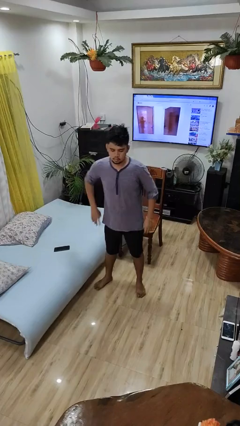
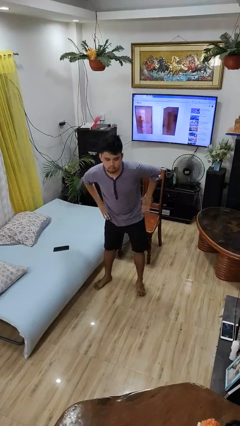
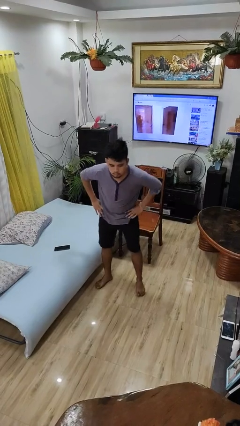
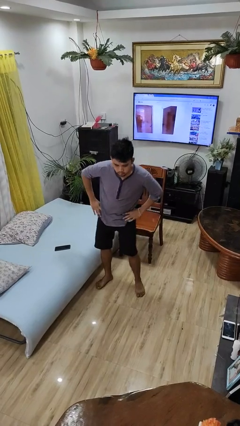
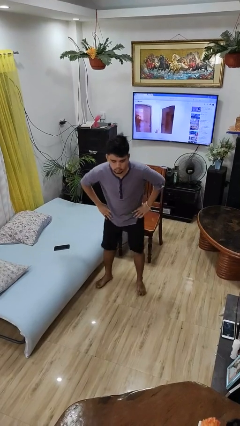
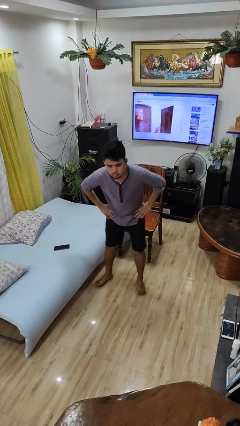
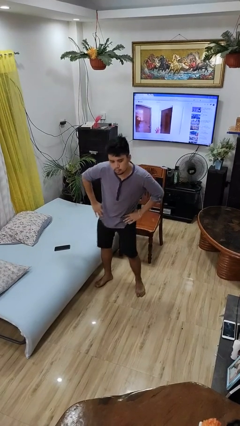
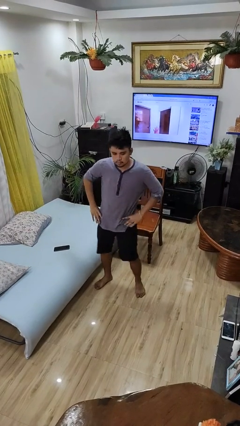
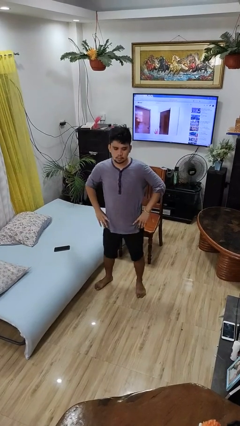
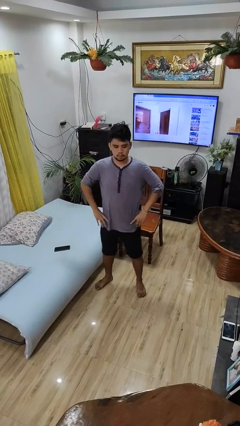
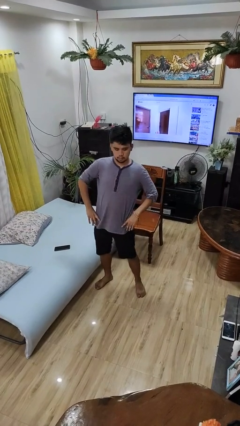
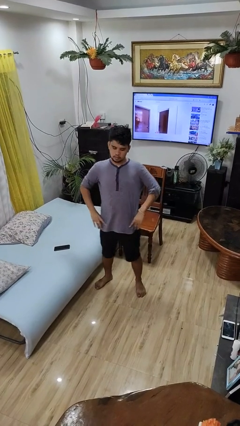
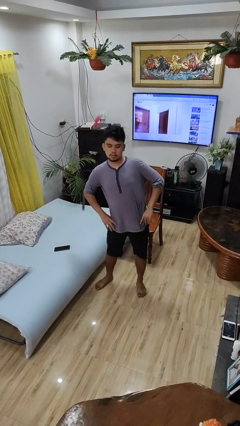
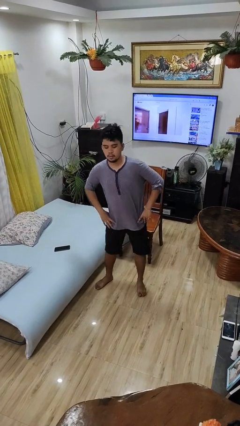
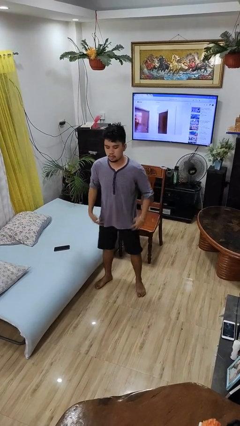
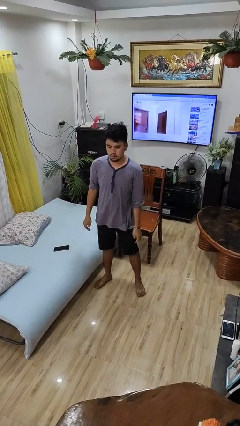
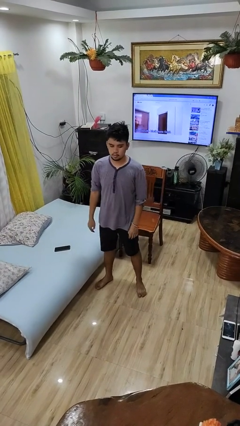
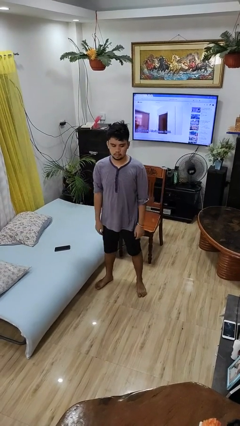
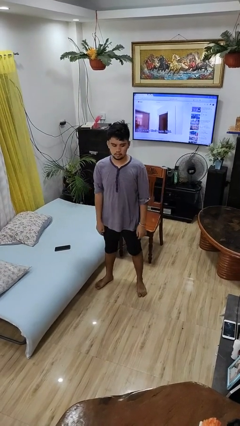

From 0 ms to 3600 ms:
person wiggles hips

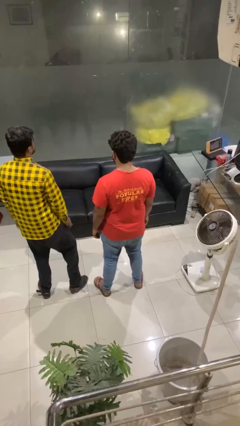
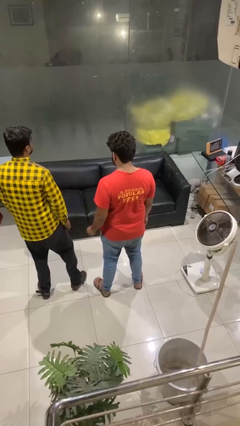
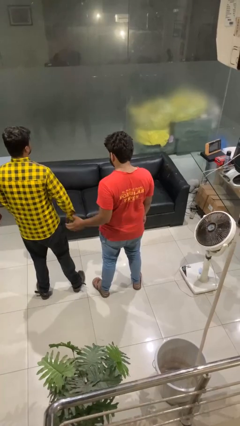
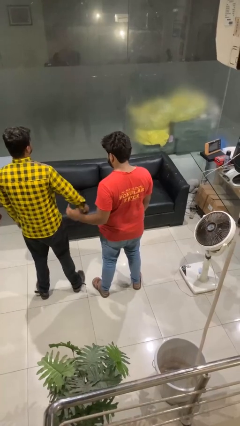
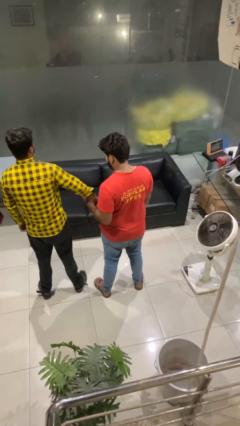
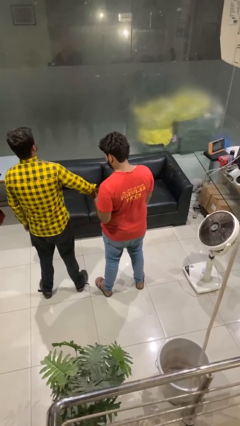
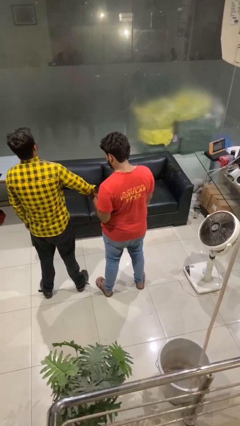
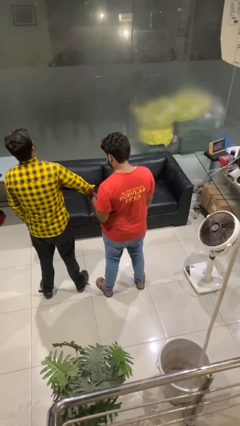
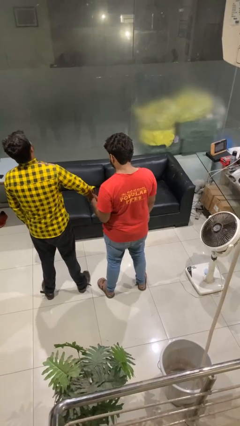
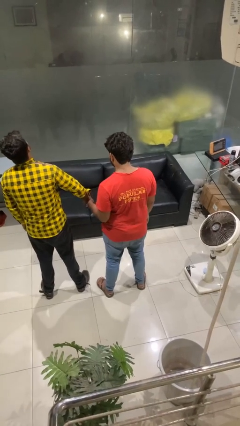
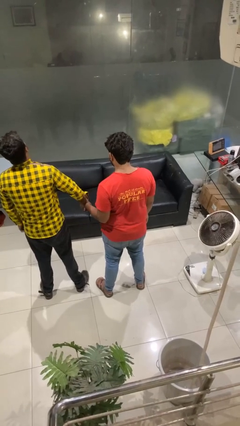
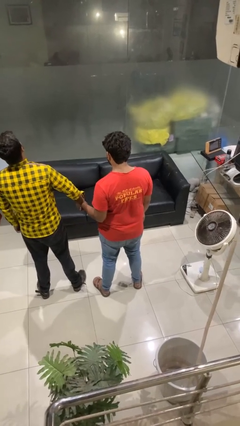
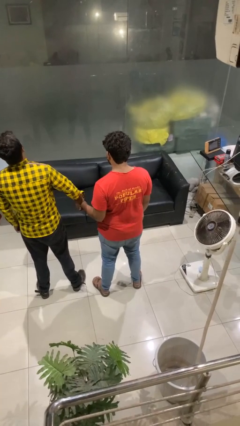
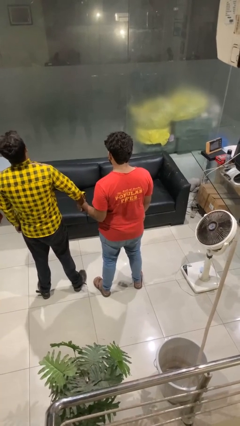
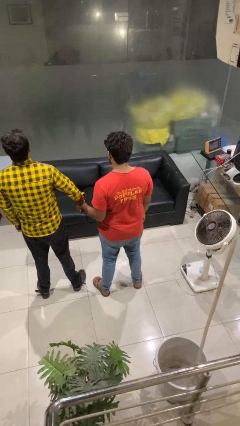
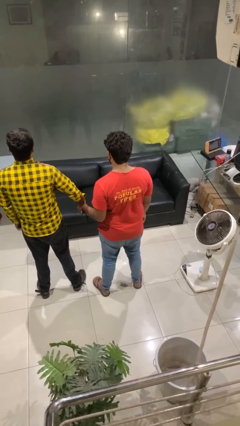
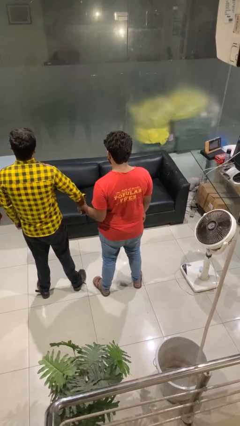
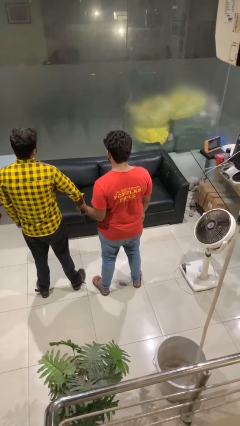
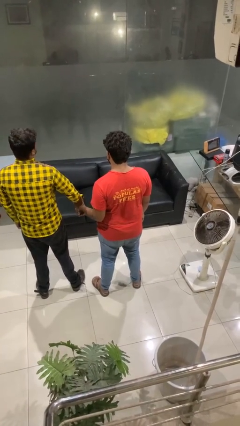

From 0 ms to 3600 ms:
person grabs person by forearm

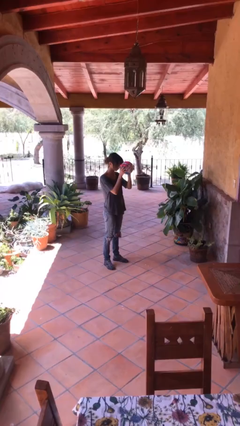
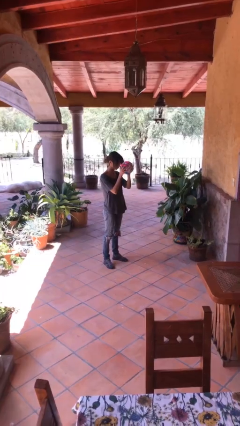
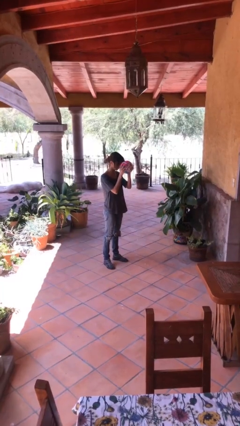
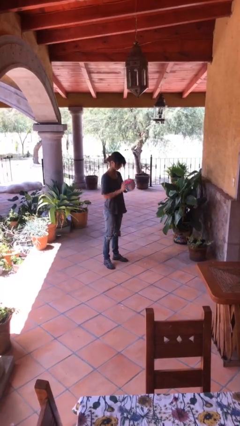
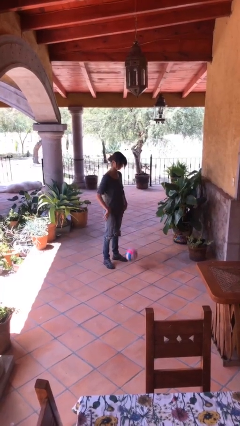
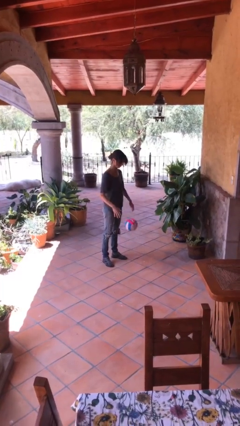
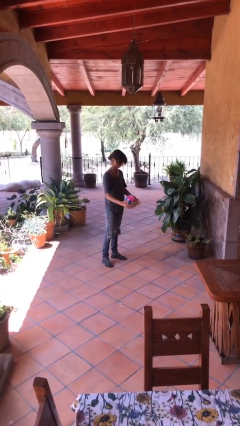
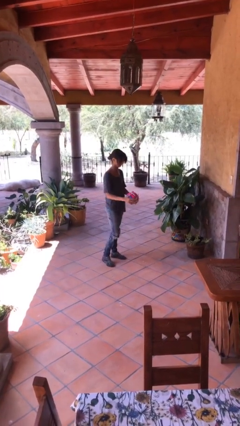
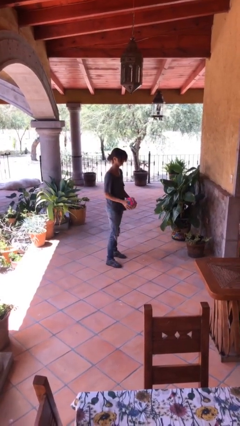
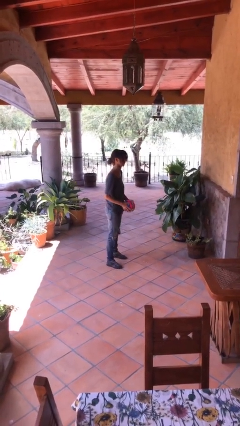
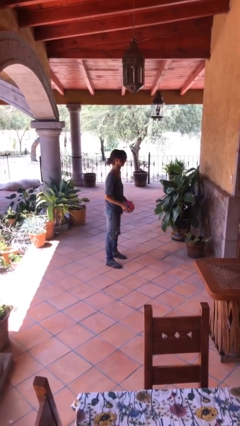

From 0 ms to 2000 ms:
person bounces ball on floor

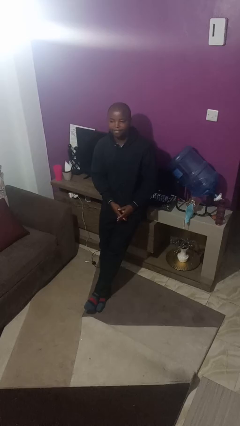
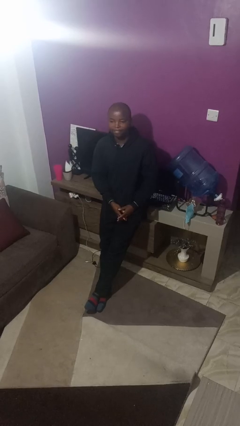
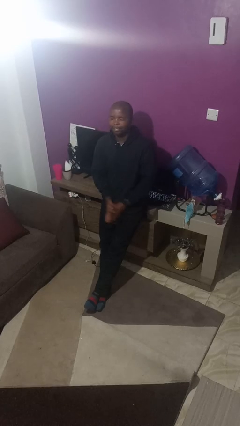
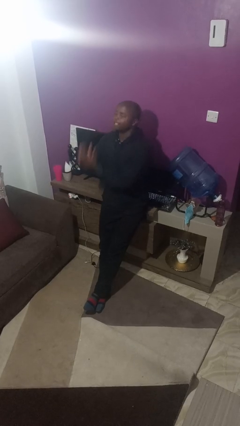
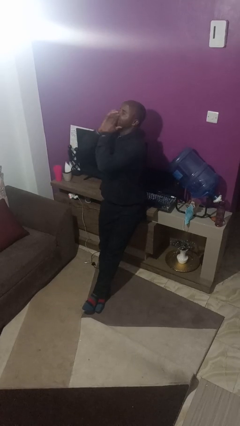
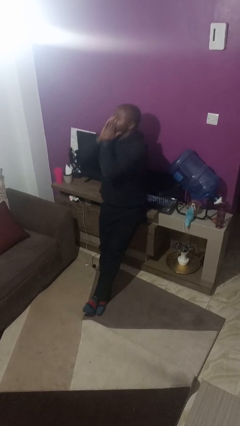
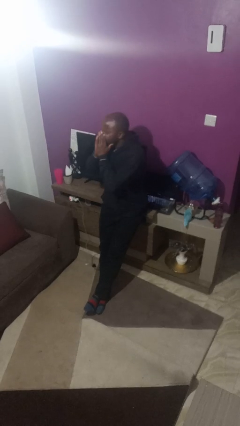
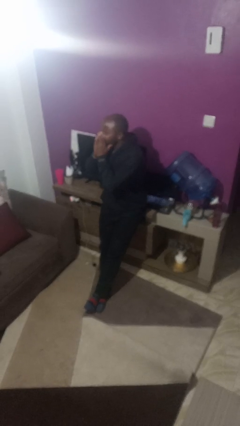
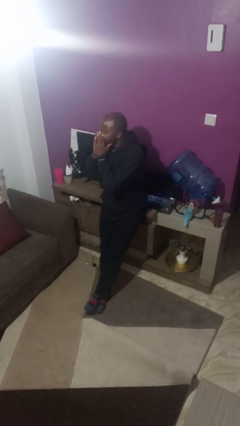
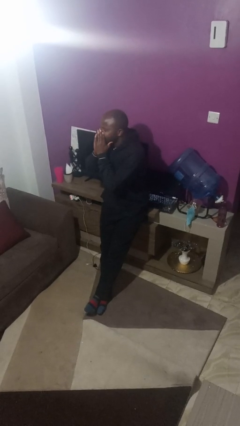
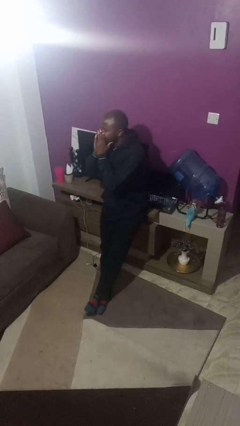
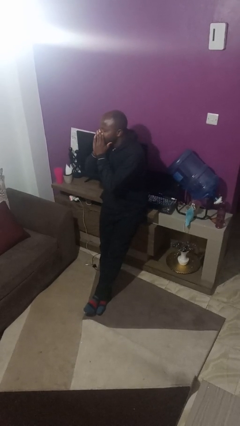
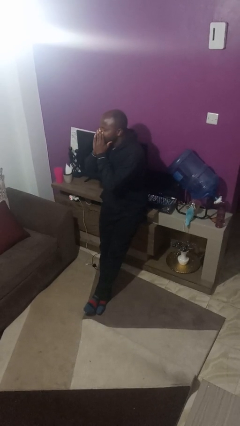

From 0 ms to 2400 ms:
person sneezes into hand

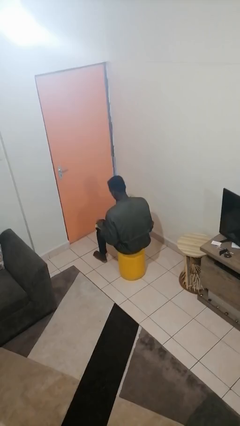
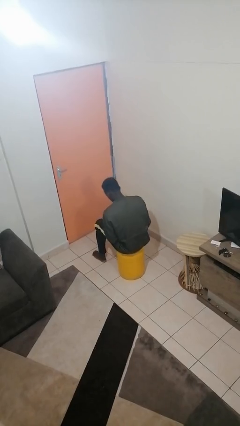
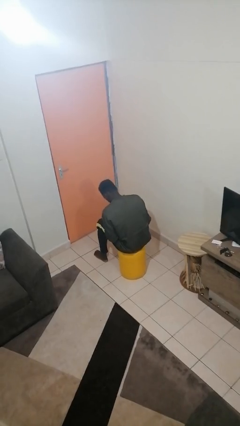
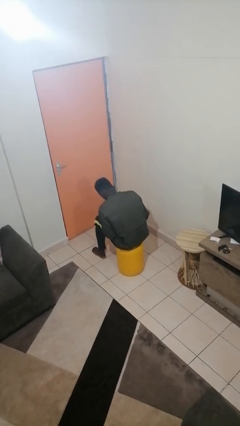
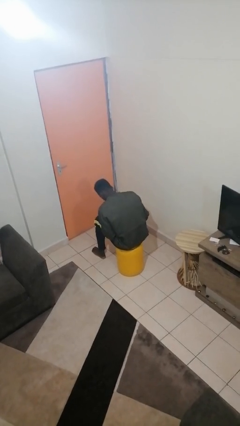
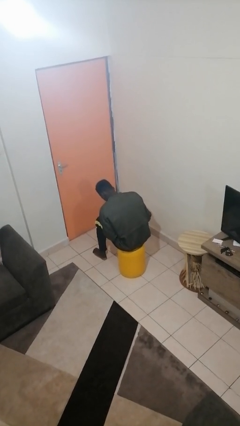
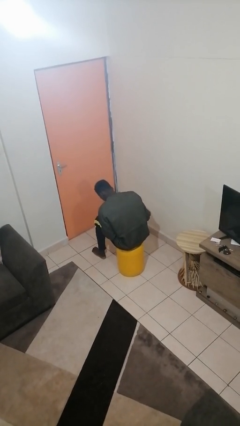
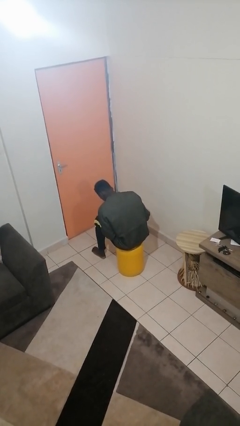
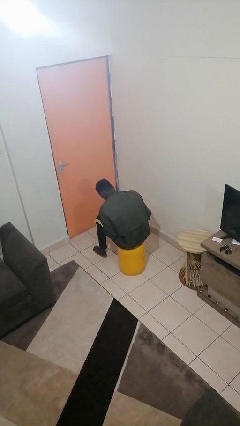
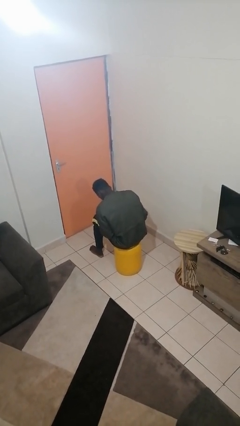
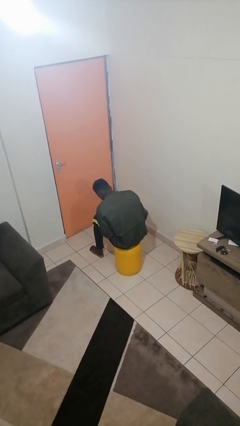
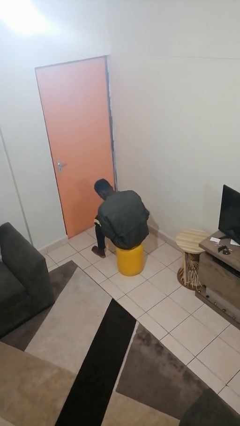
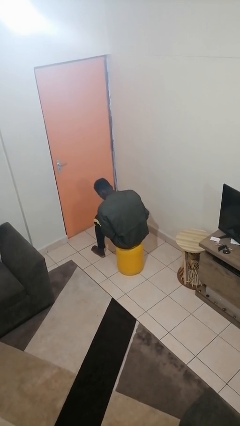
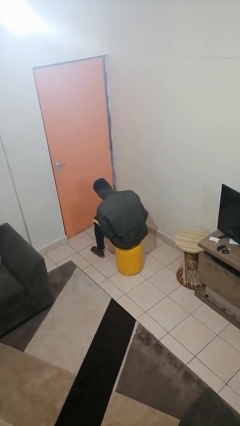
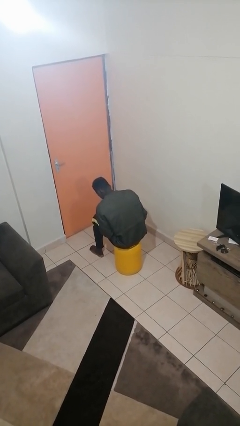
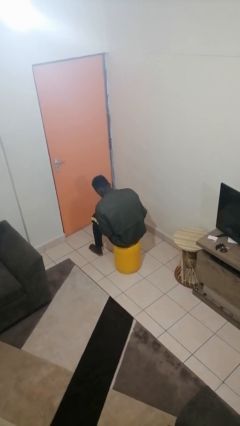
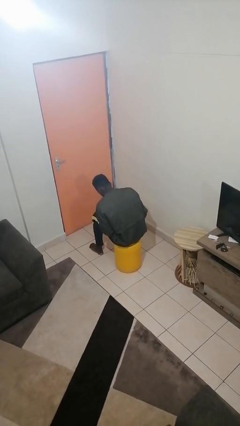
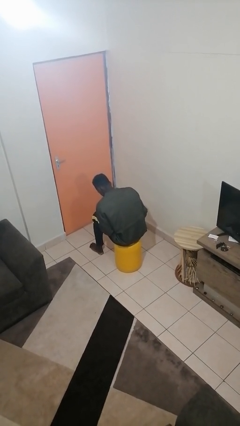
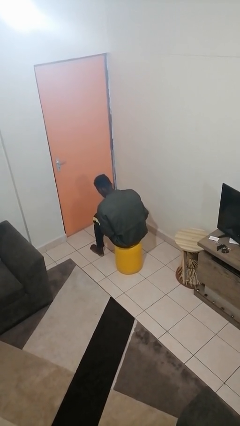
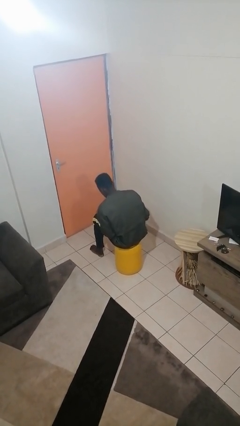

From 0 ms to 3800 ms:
person looks at hands in lap

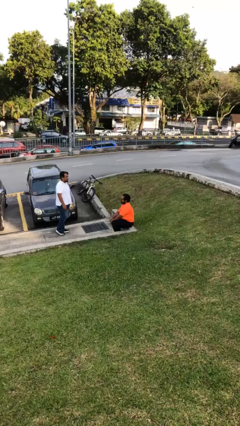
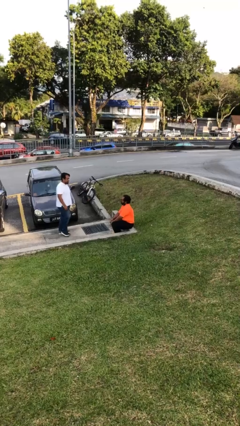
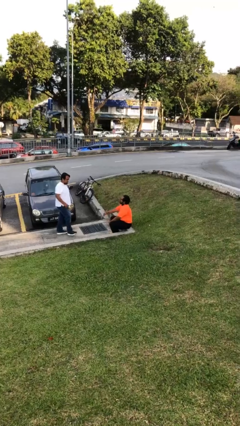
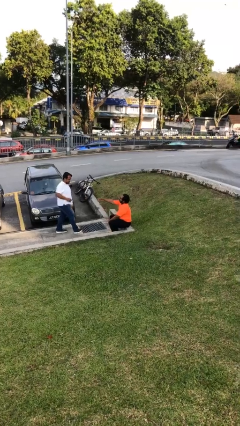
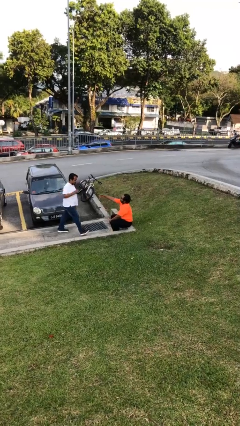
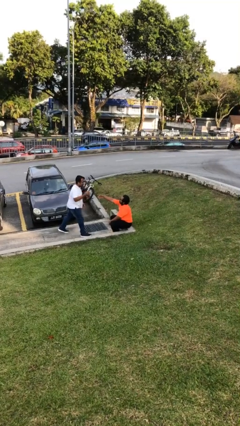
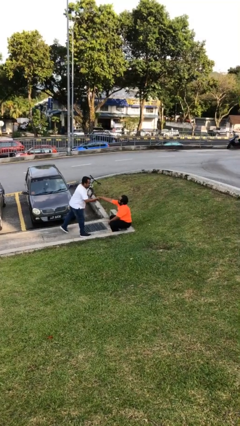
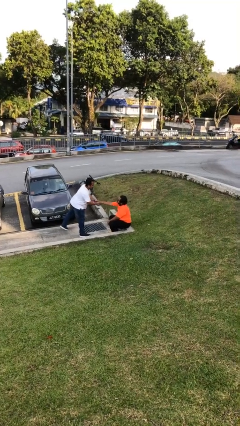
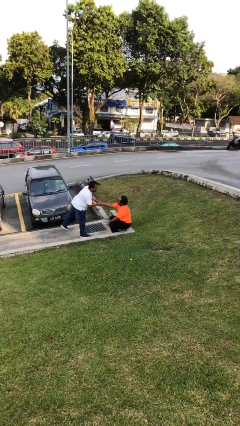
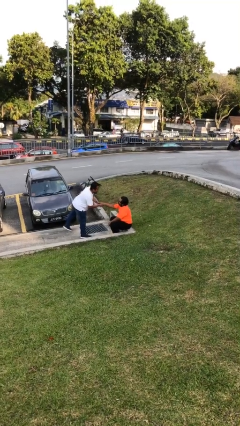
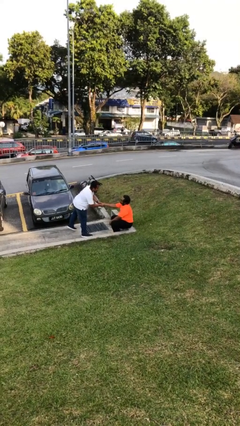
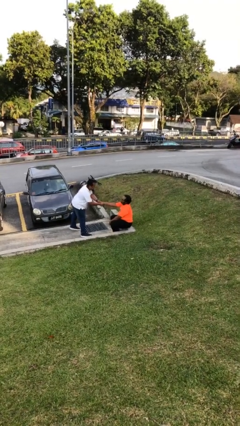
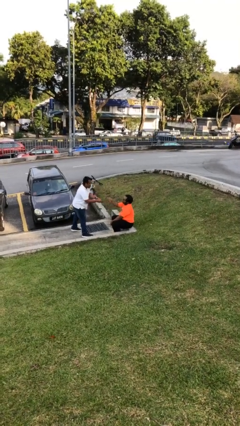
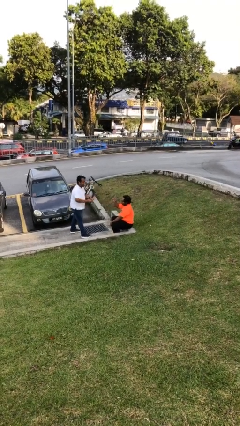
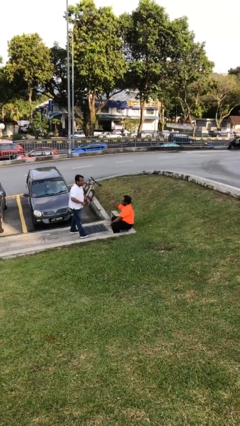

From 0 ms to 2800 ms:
person shakes hand
